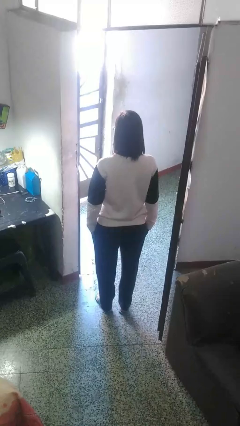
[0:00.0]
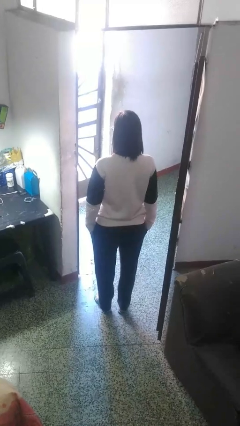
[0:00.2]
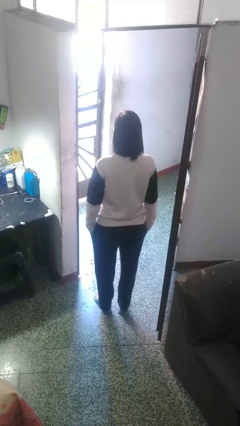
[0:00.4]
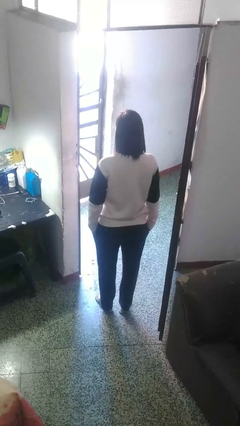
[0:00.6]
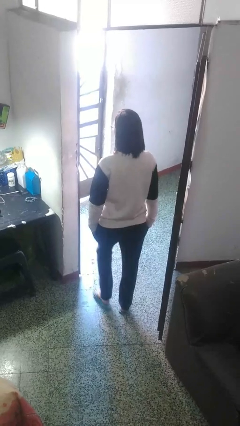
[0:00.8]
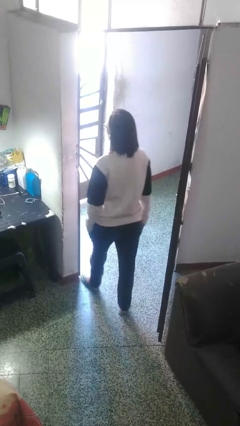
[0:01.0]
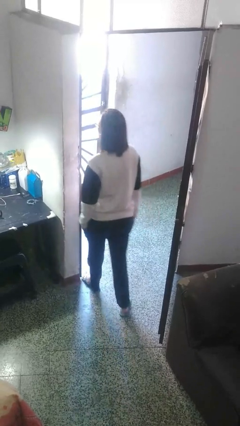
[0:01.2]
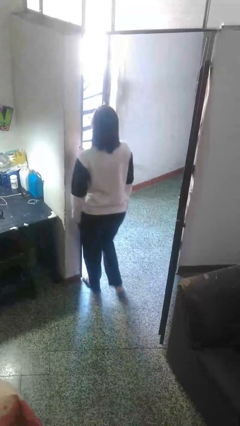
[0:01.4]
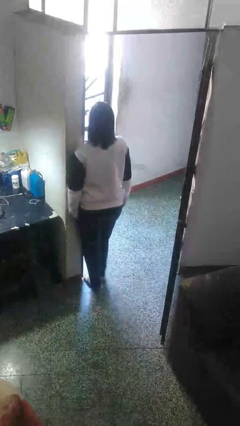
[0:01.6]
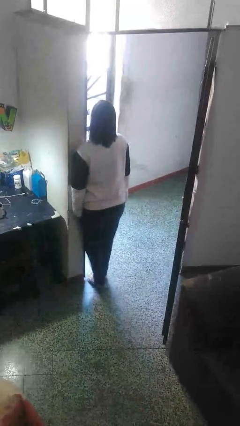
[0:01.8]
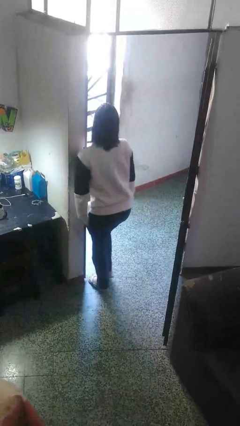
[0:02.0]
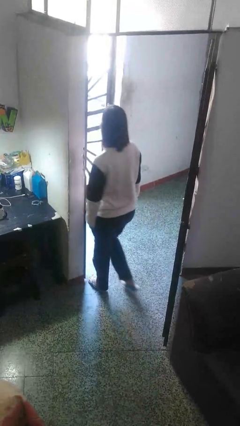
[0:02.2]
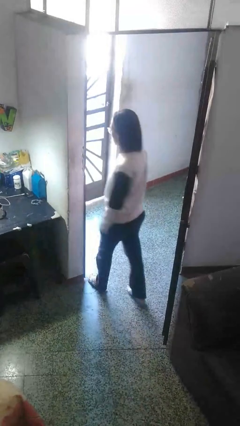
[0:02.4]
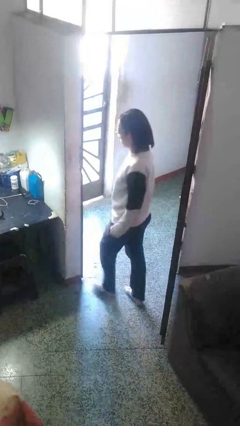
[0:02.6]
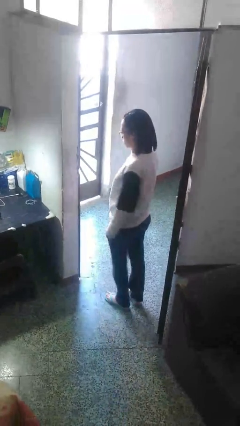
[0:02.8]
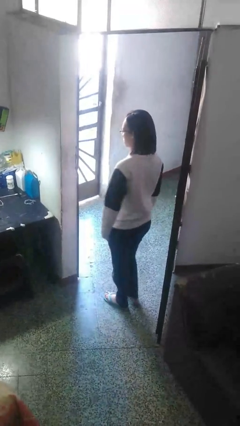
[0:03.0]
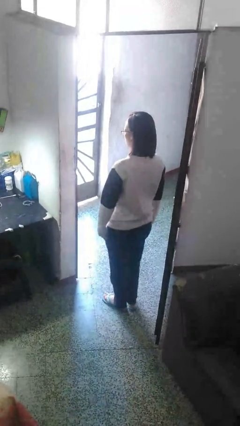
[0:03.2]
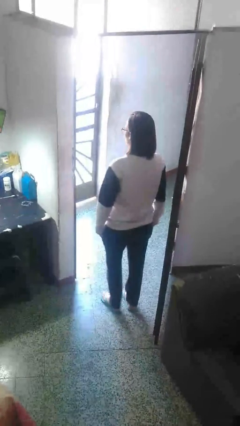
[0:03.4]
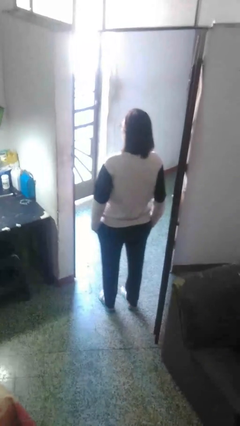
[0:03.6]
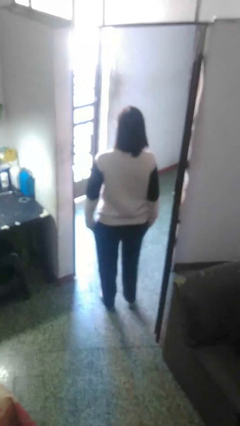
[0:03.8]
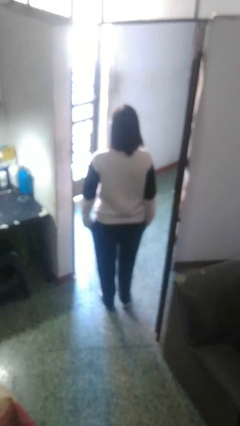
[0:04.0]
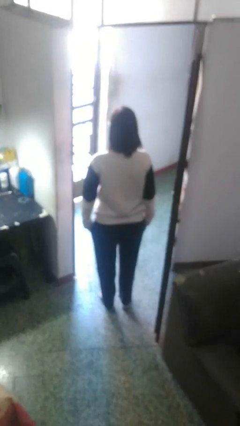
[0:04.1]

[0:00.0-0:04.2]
person bumps into wall

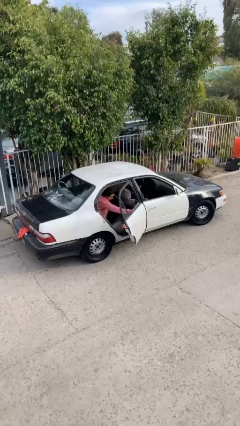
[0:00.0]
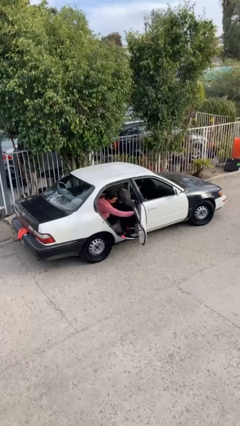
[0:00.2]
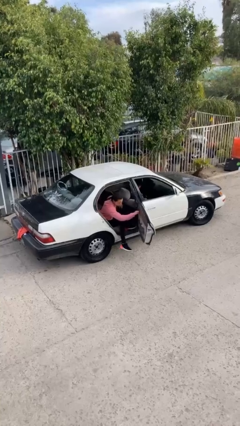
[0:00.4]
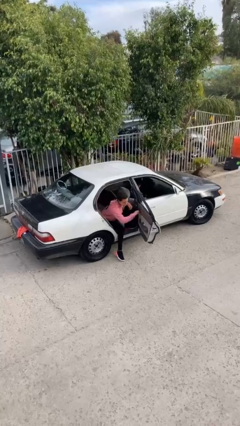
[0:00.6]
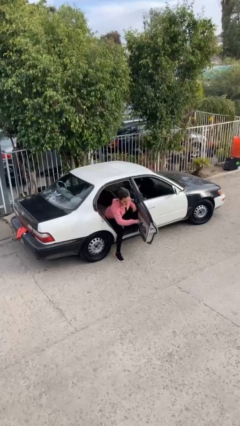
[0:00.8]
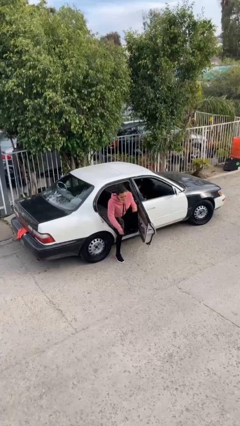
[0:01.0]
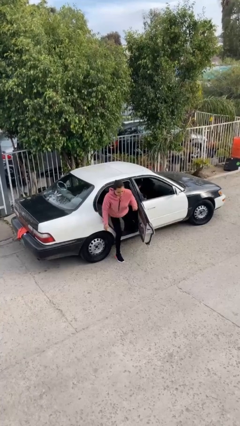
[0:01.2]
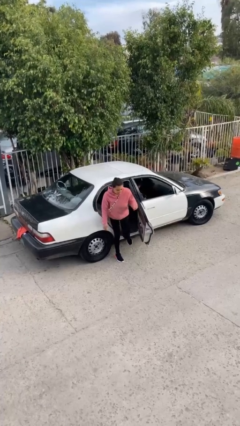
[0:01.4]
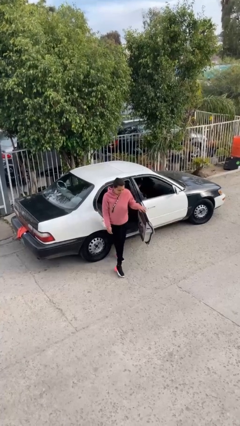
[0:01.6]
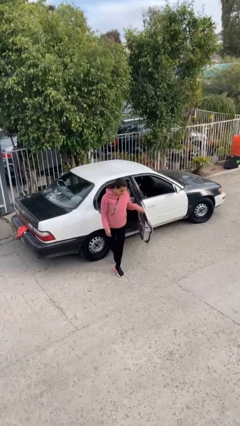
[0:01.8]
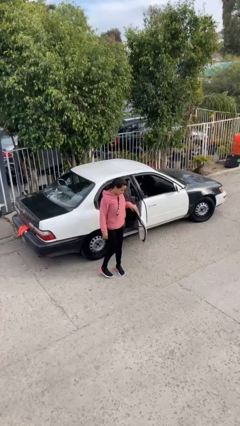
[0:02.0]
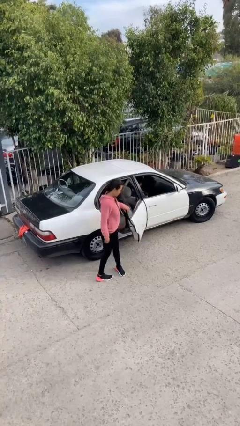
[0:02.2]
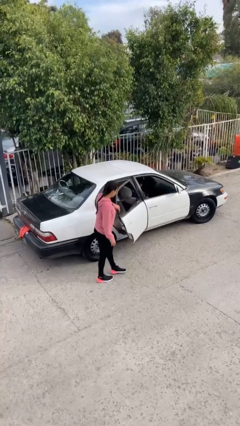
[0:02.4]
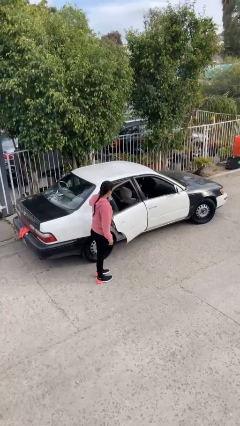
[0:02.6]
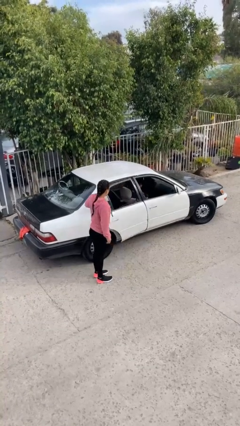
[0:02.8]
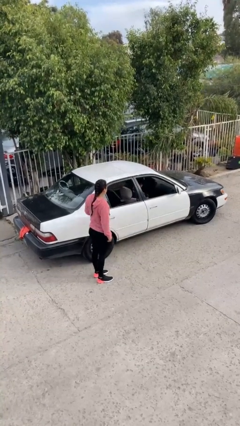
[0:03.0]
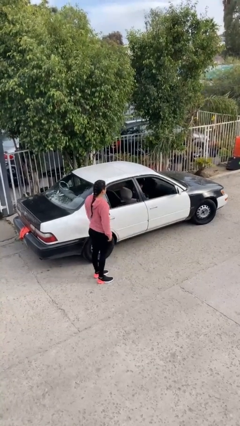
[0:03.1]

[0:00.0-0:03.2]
car drops off person

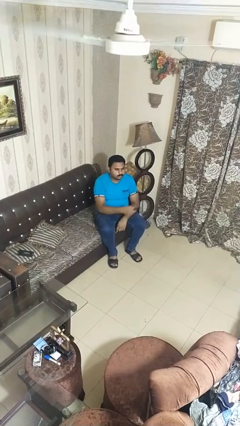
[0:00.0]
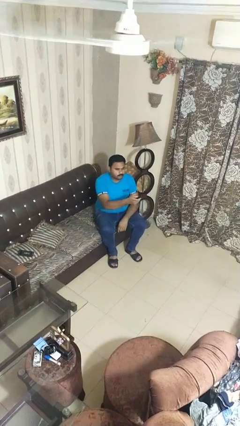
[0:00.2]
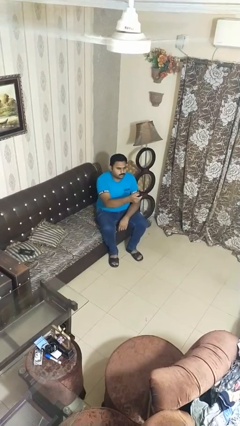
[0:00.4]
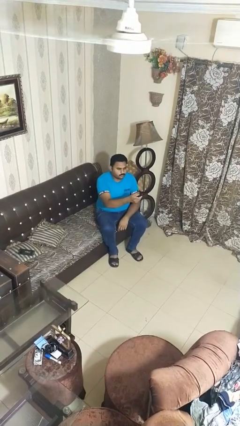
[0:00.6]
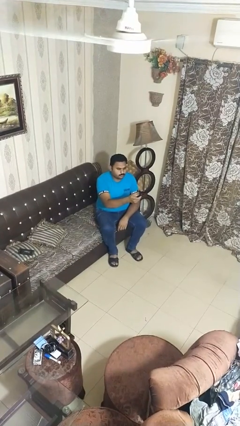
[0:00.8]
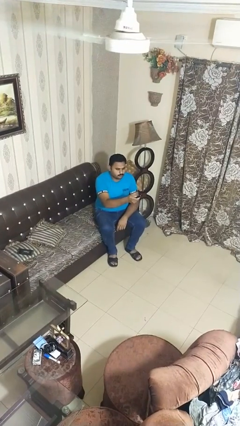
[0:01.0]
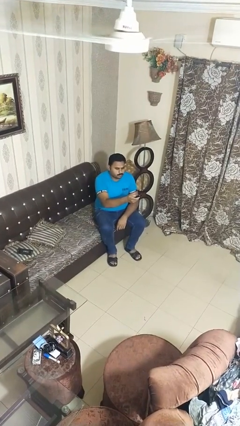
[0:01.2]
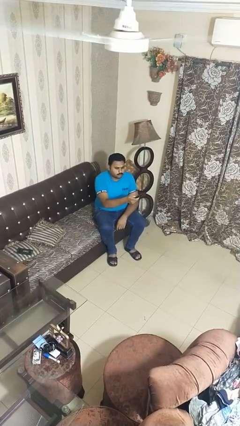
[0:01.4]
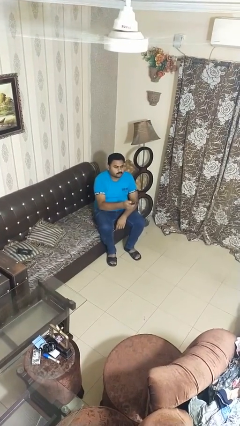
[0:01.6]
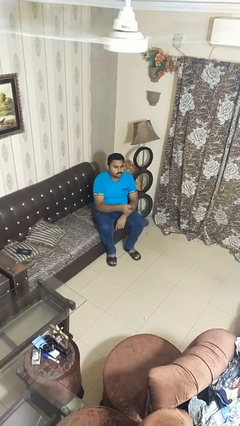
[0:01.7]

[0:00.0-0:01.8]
person uses television remote

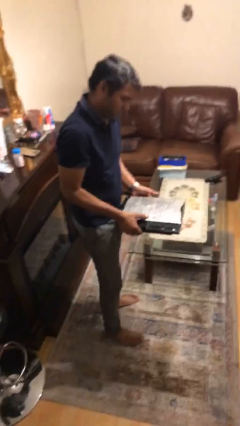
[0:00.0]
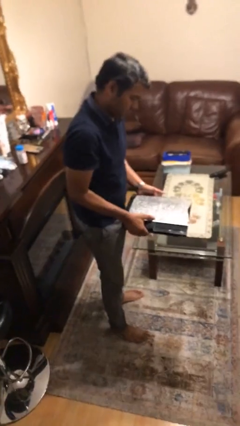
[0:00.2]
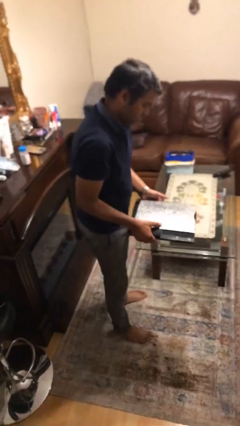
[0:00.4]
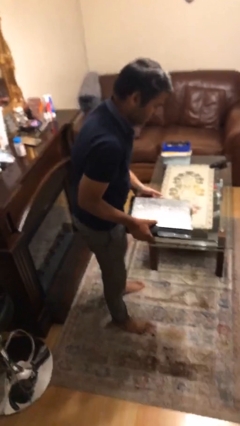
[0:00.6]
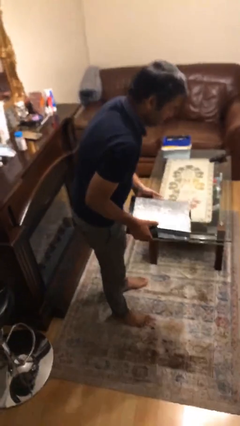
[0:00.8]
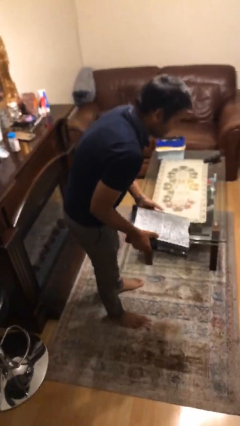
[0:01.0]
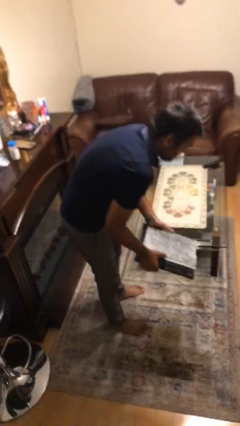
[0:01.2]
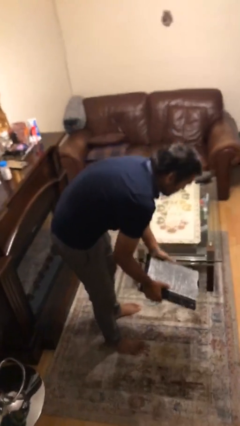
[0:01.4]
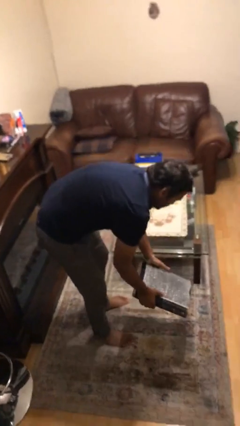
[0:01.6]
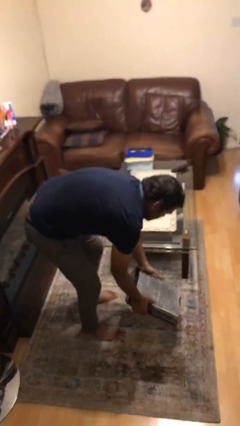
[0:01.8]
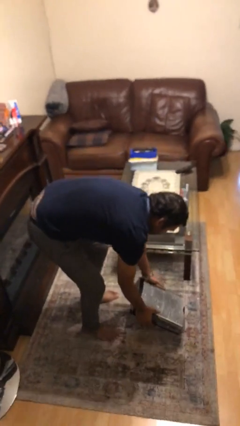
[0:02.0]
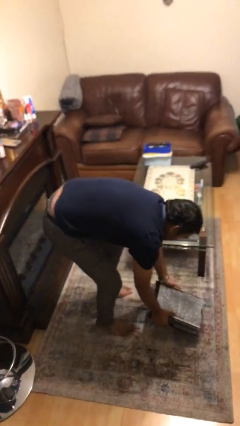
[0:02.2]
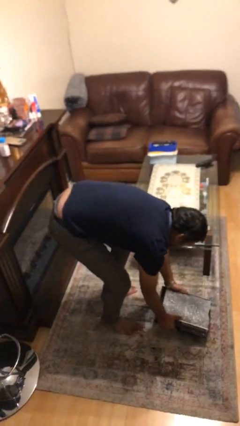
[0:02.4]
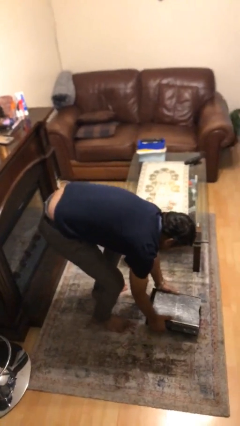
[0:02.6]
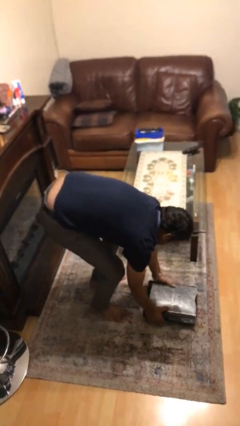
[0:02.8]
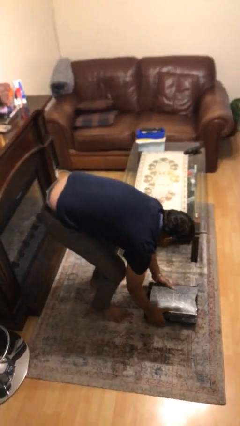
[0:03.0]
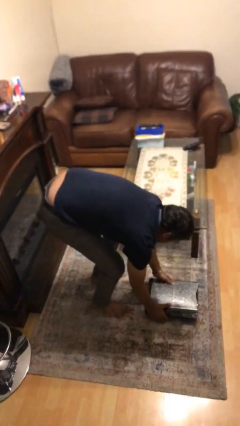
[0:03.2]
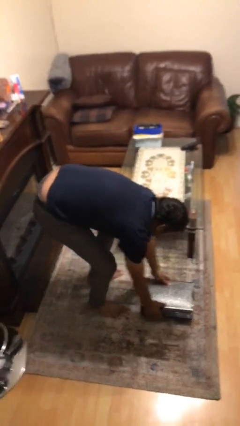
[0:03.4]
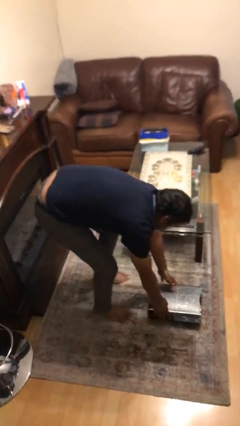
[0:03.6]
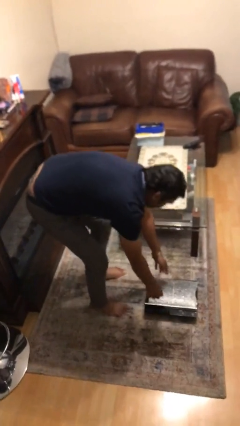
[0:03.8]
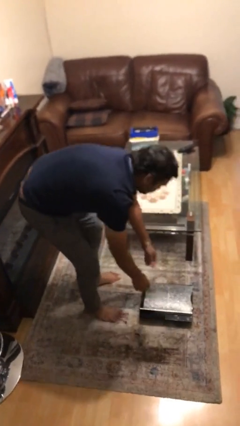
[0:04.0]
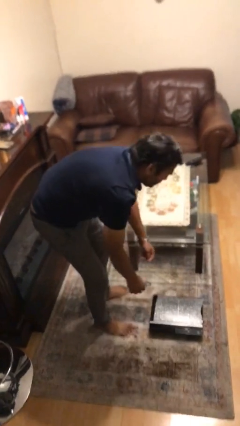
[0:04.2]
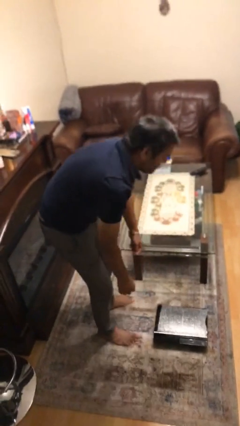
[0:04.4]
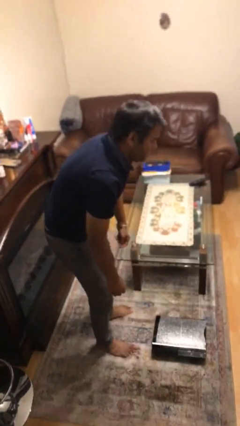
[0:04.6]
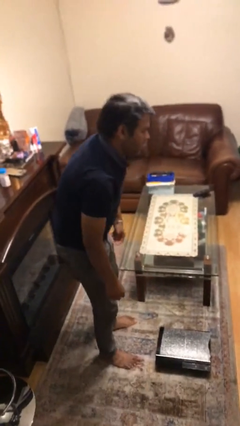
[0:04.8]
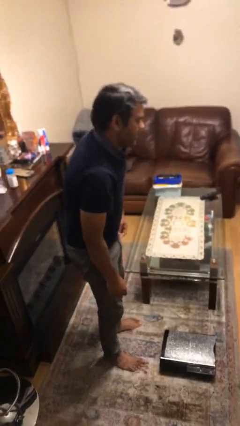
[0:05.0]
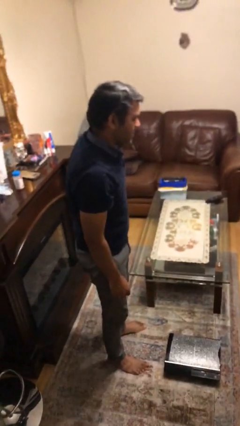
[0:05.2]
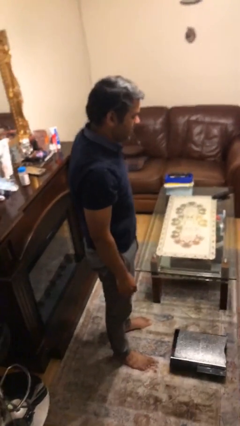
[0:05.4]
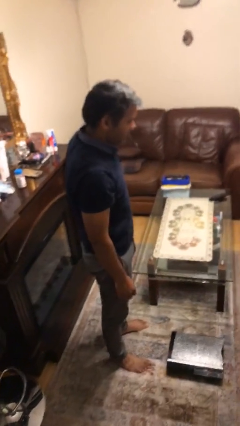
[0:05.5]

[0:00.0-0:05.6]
person puts down object on floor

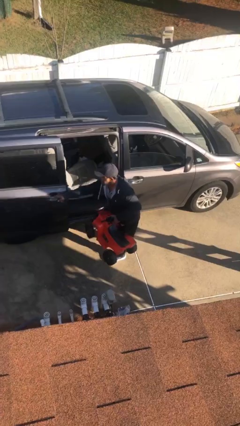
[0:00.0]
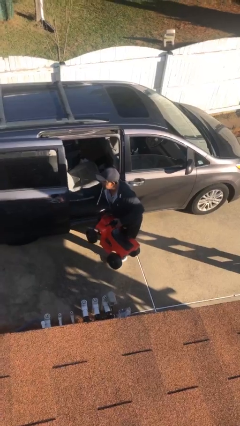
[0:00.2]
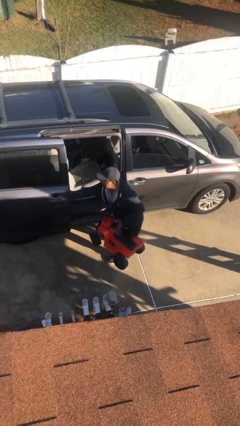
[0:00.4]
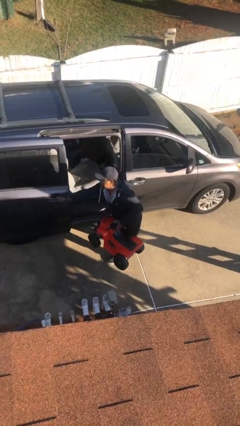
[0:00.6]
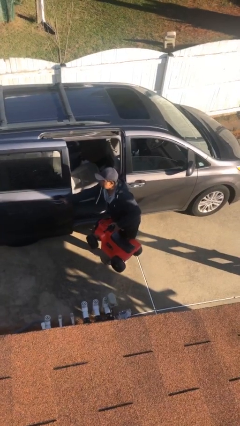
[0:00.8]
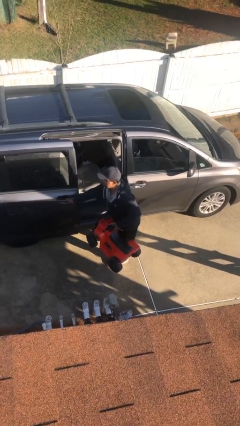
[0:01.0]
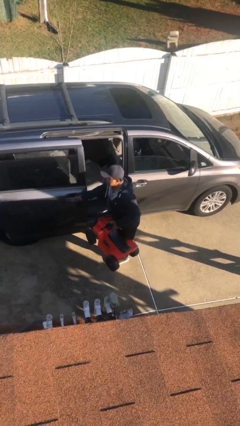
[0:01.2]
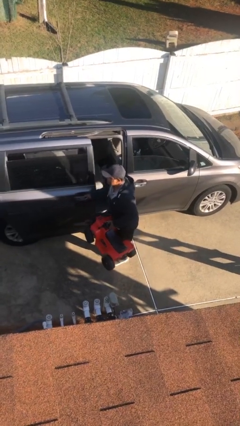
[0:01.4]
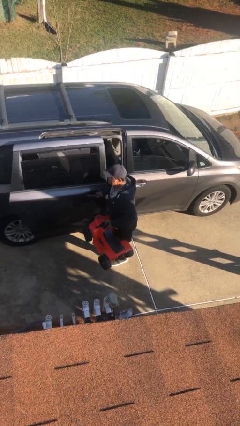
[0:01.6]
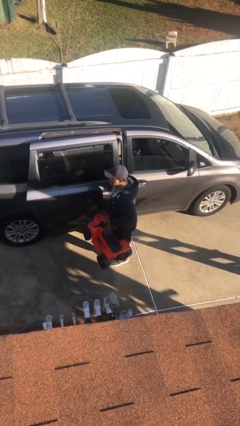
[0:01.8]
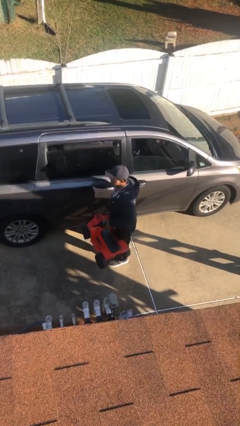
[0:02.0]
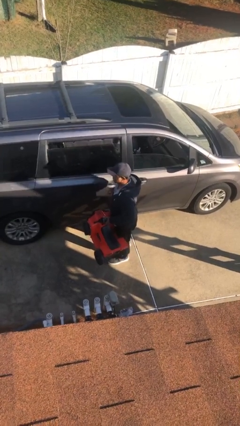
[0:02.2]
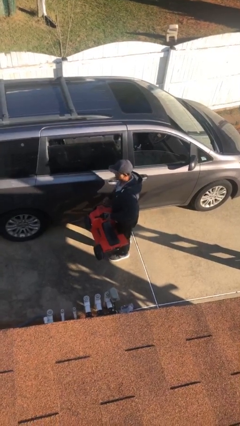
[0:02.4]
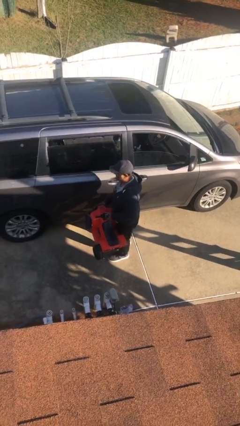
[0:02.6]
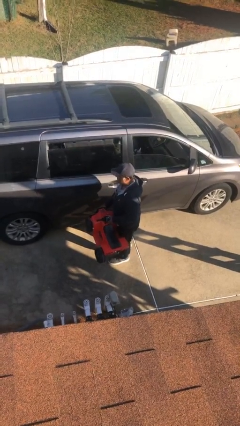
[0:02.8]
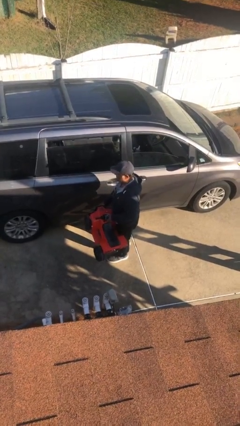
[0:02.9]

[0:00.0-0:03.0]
person closes car door
